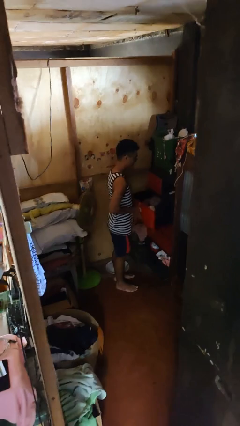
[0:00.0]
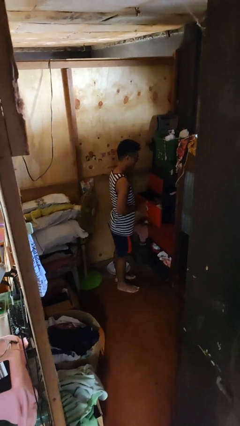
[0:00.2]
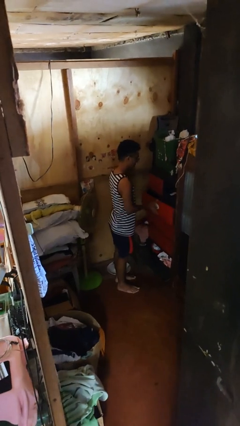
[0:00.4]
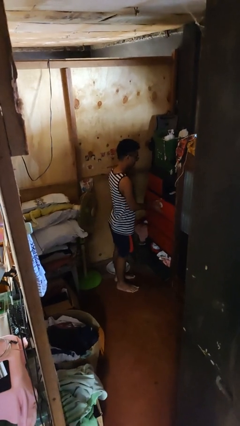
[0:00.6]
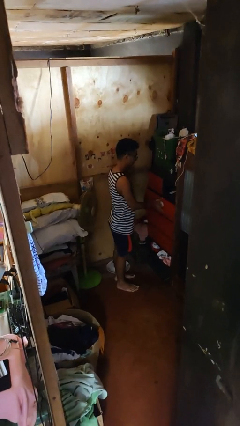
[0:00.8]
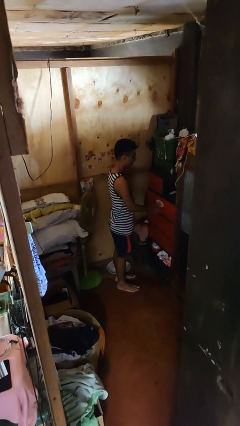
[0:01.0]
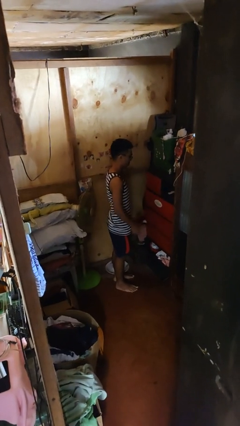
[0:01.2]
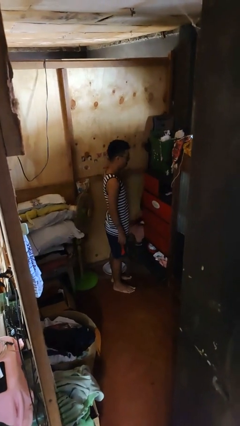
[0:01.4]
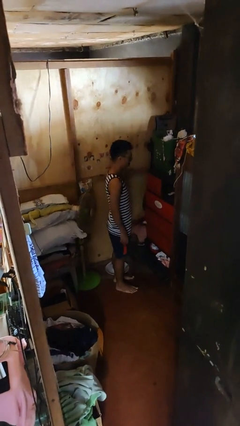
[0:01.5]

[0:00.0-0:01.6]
person closes dresser drawer

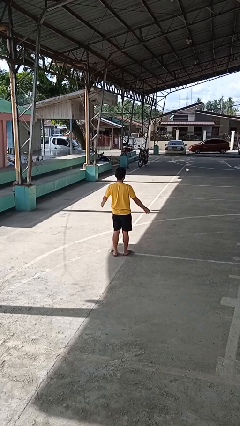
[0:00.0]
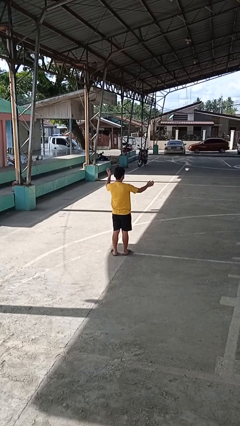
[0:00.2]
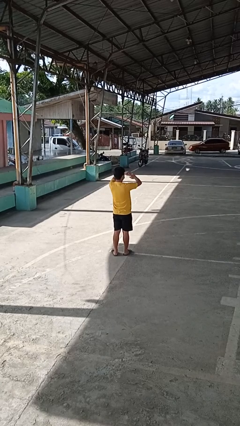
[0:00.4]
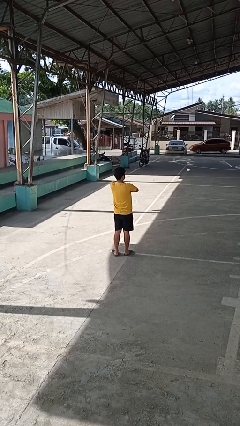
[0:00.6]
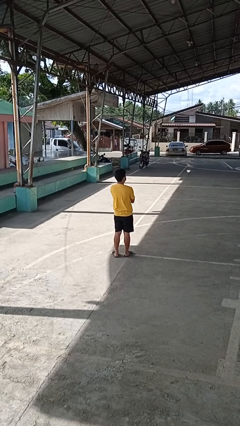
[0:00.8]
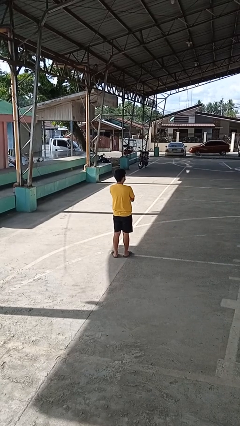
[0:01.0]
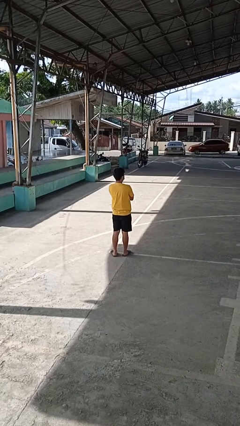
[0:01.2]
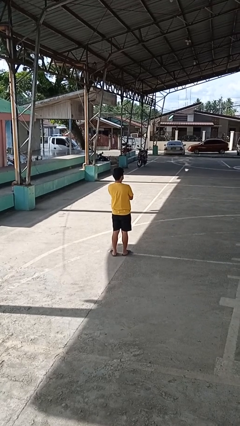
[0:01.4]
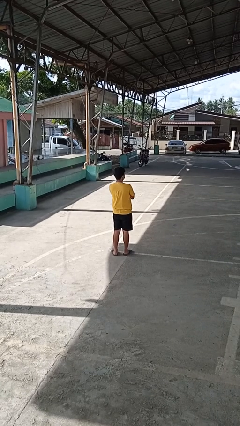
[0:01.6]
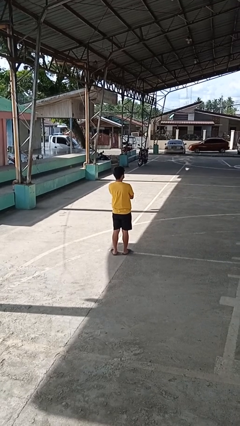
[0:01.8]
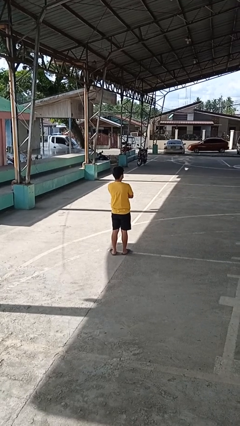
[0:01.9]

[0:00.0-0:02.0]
person crosses arms

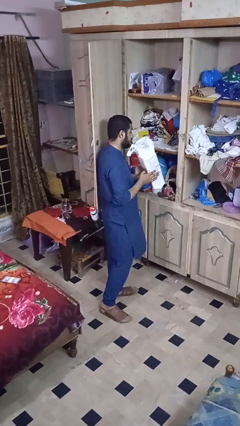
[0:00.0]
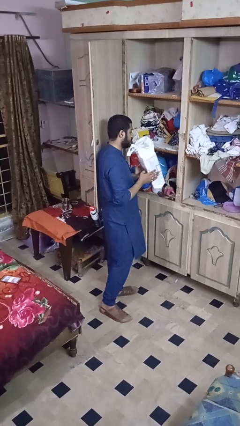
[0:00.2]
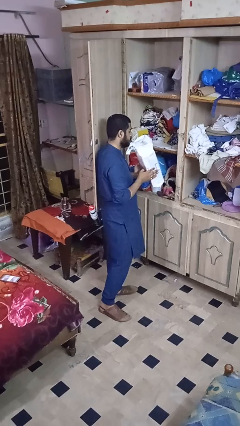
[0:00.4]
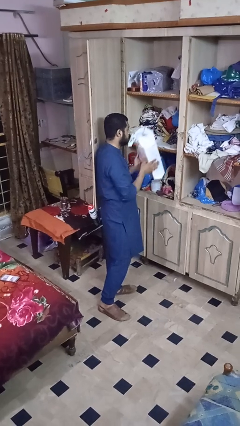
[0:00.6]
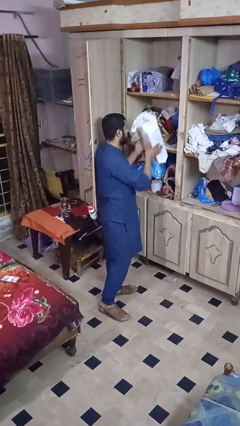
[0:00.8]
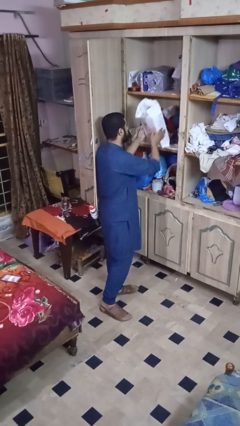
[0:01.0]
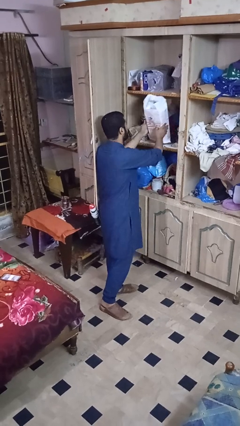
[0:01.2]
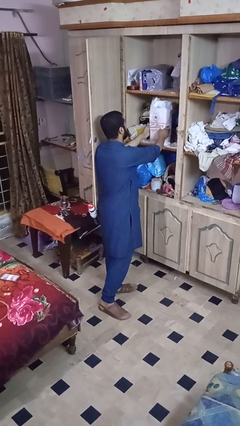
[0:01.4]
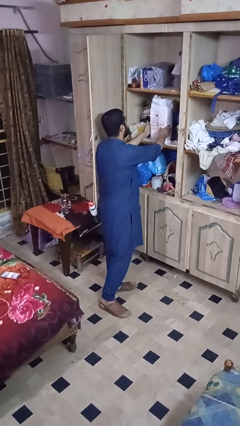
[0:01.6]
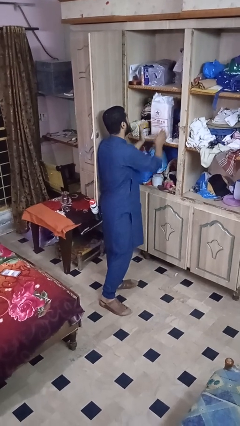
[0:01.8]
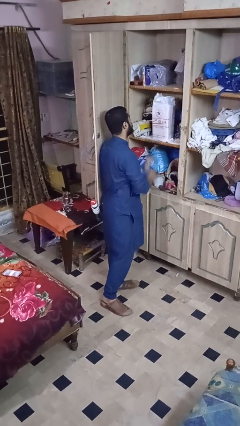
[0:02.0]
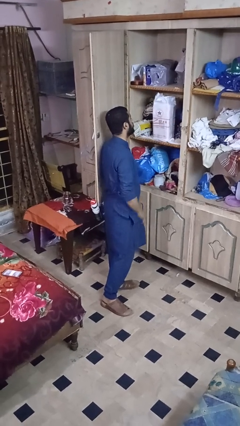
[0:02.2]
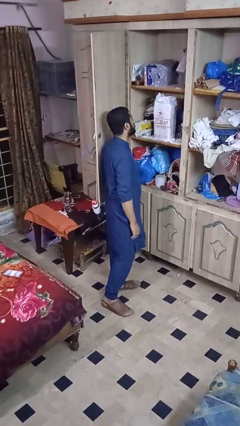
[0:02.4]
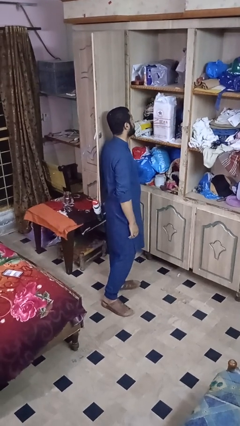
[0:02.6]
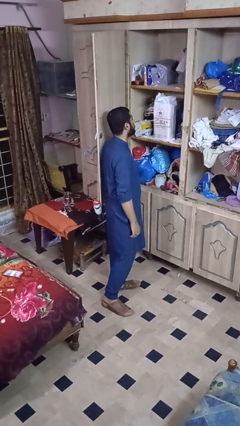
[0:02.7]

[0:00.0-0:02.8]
person puts down object into cabinet

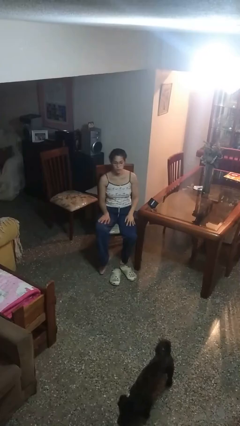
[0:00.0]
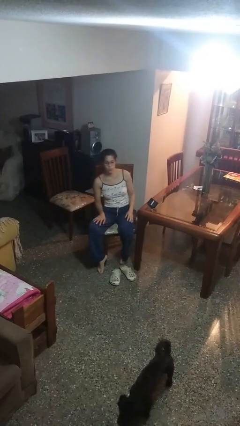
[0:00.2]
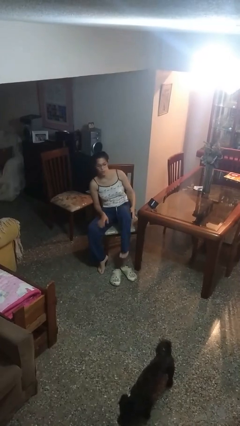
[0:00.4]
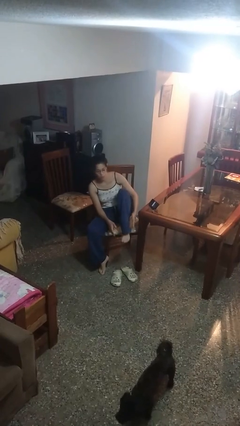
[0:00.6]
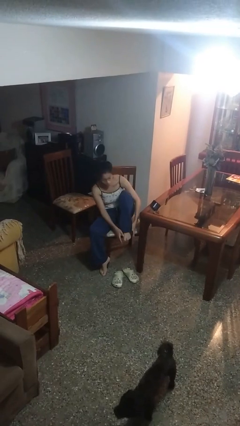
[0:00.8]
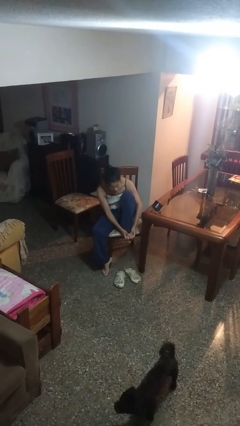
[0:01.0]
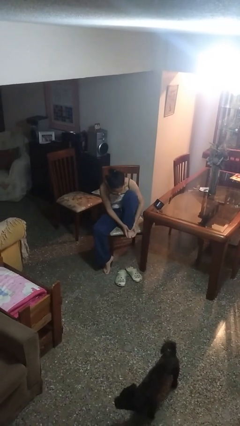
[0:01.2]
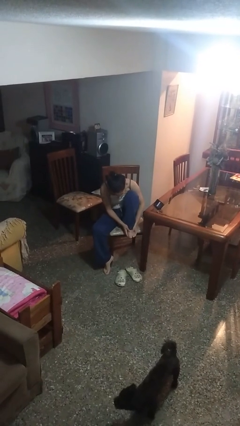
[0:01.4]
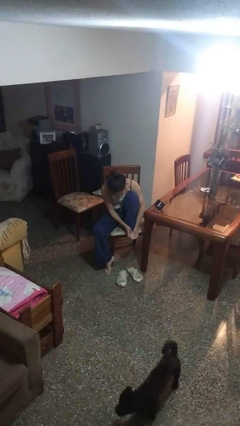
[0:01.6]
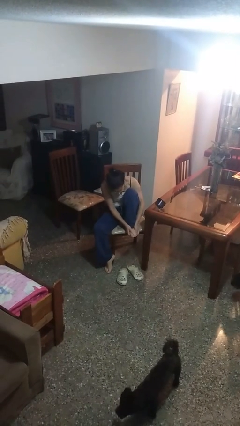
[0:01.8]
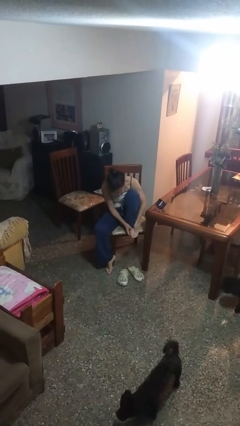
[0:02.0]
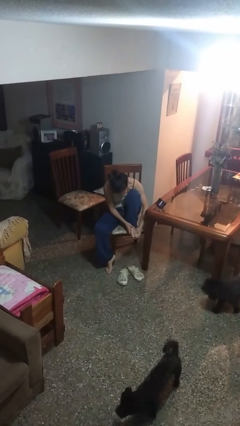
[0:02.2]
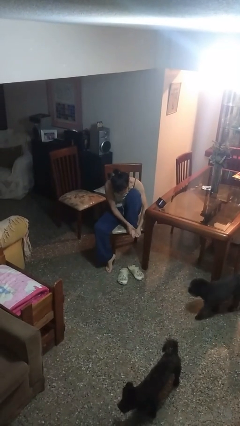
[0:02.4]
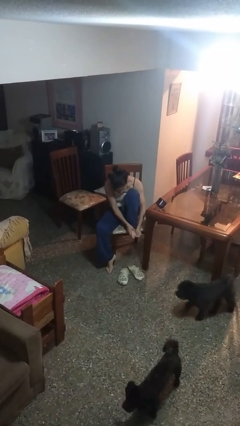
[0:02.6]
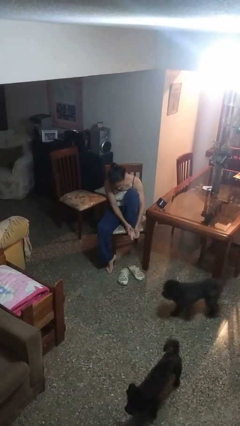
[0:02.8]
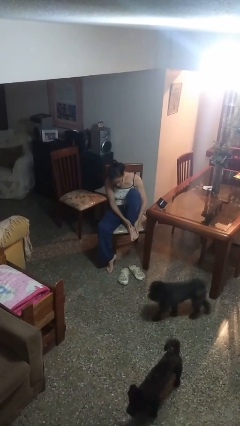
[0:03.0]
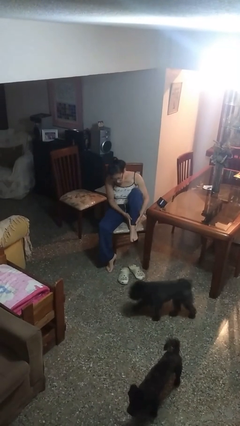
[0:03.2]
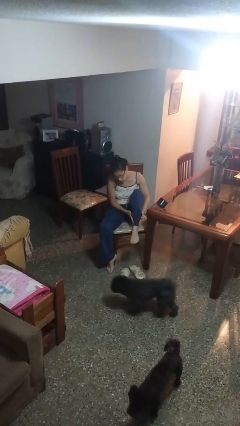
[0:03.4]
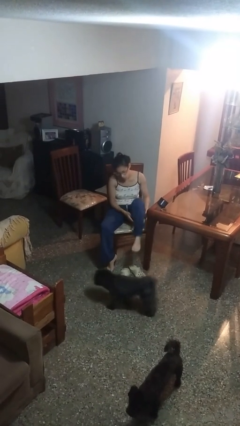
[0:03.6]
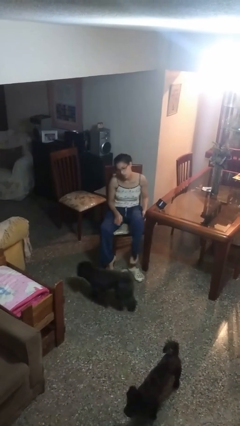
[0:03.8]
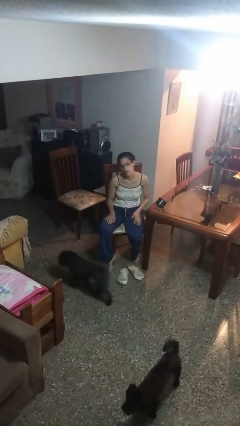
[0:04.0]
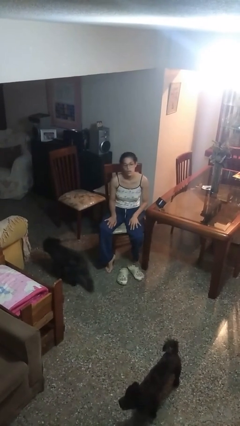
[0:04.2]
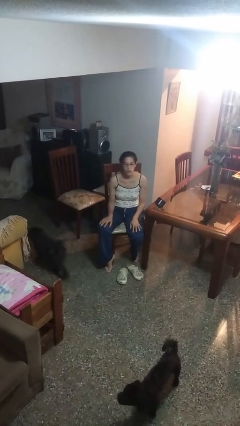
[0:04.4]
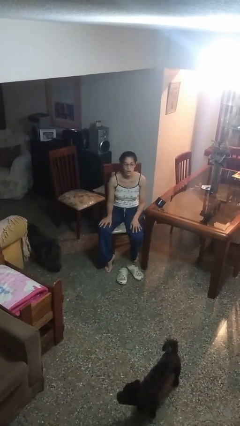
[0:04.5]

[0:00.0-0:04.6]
person rubs foot

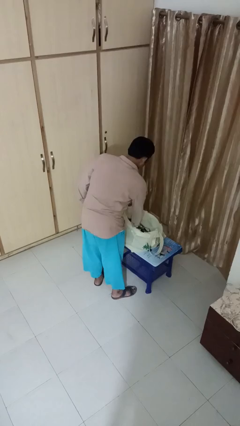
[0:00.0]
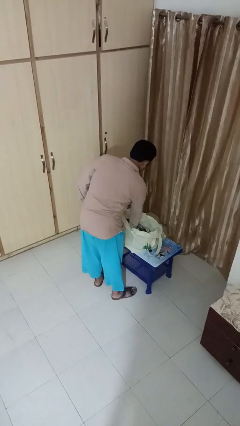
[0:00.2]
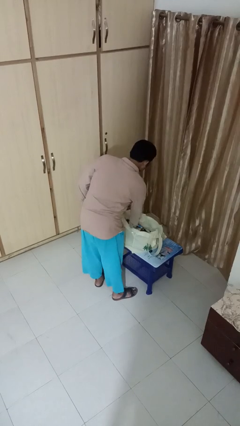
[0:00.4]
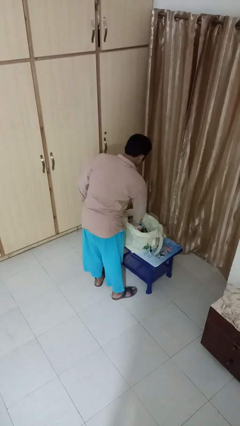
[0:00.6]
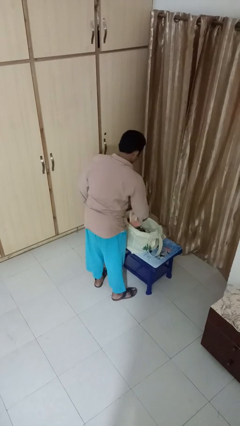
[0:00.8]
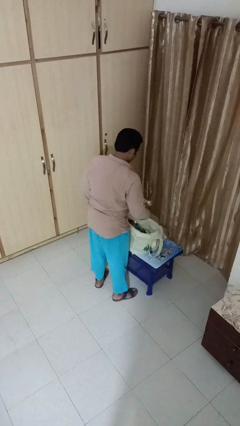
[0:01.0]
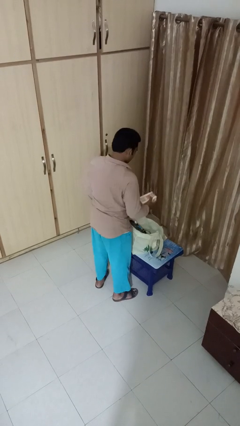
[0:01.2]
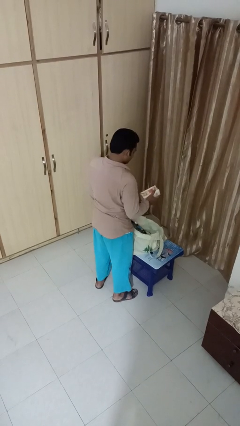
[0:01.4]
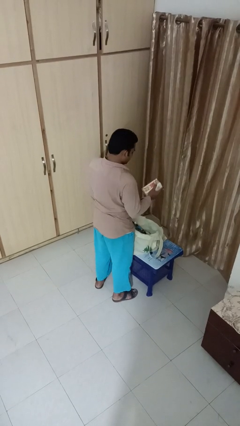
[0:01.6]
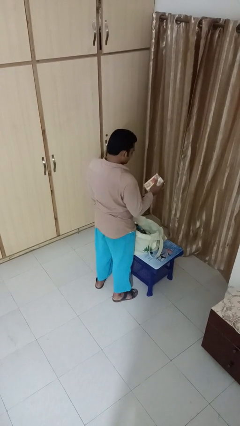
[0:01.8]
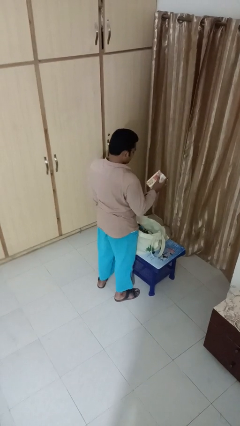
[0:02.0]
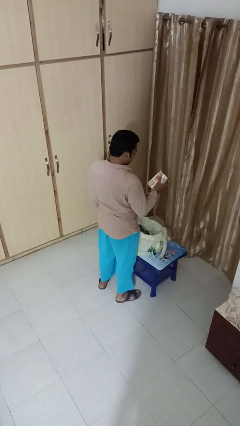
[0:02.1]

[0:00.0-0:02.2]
person takes object from bag

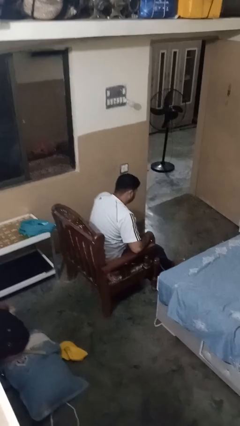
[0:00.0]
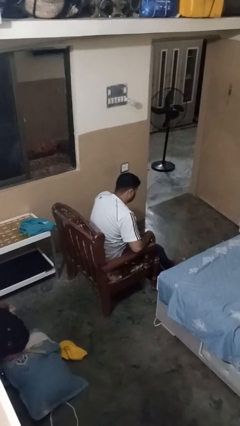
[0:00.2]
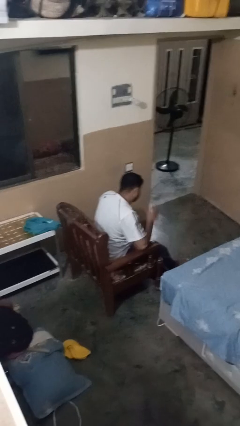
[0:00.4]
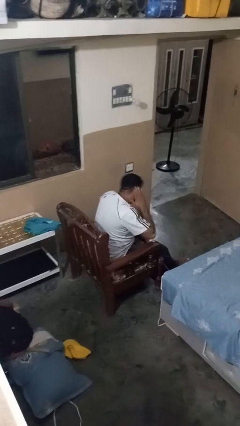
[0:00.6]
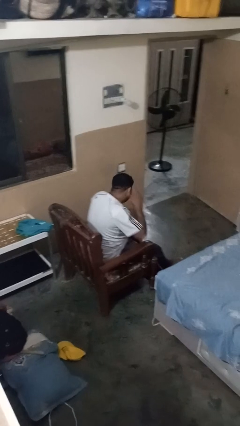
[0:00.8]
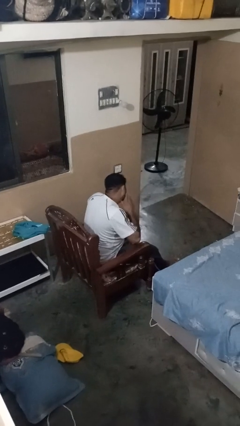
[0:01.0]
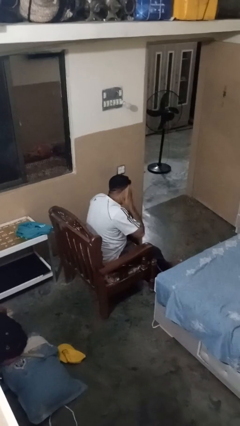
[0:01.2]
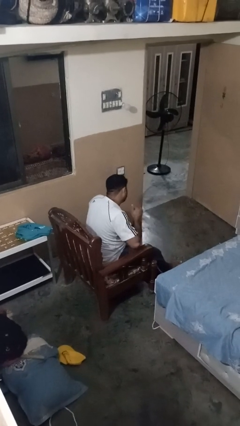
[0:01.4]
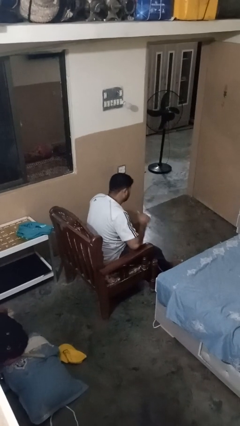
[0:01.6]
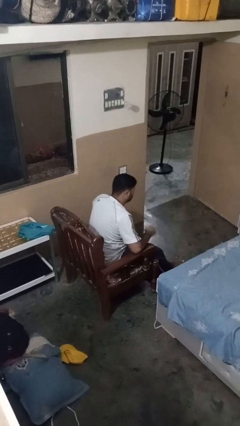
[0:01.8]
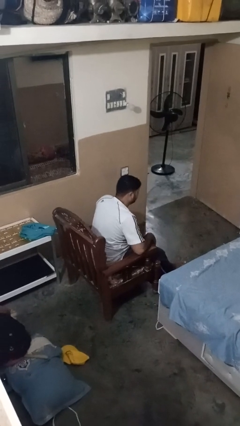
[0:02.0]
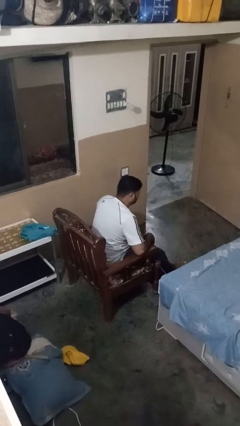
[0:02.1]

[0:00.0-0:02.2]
person swats bug

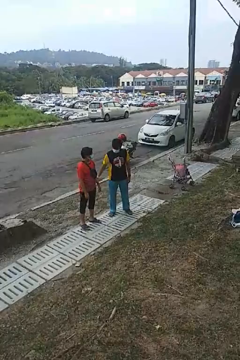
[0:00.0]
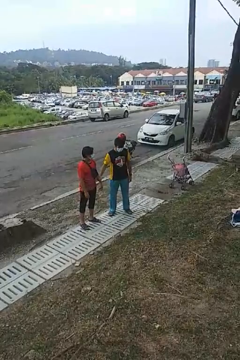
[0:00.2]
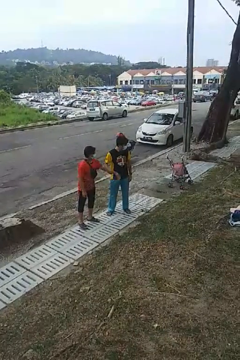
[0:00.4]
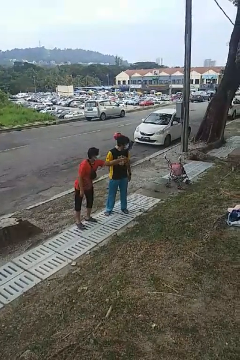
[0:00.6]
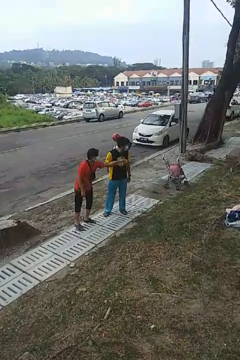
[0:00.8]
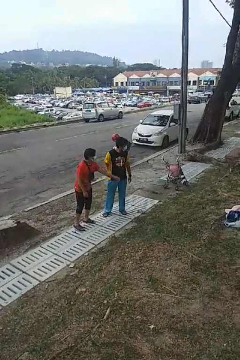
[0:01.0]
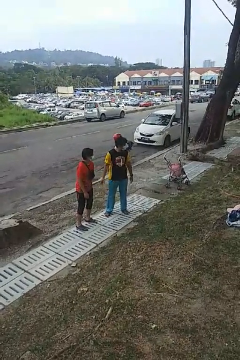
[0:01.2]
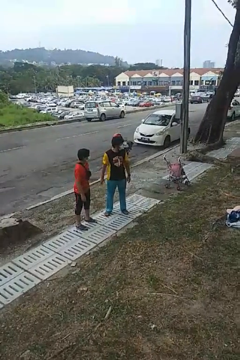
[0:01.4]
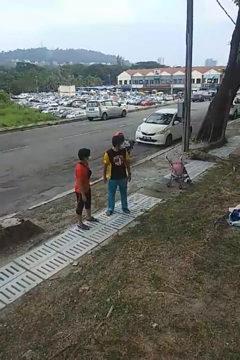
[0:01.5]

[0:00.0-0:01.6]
person grabs person by forearm
